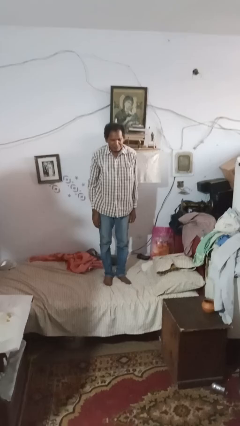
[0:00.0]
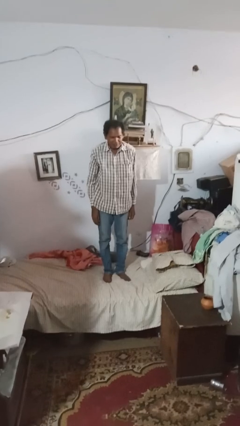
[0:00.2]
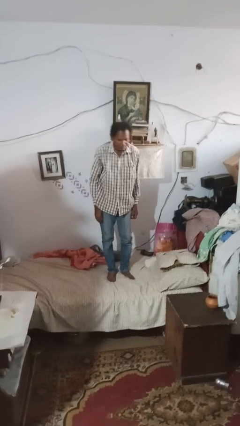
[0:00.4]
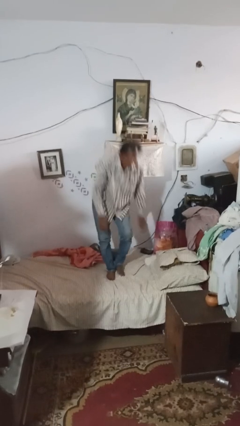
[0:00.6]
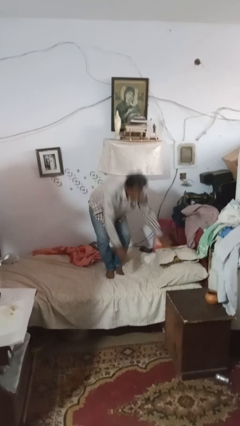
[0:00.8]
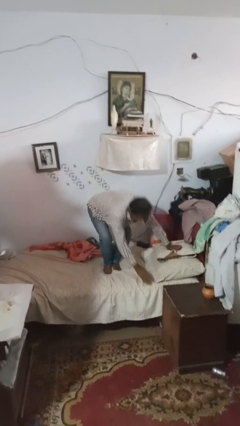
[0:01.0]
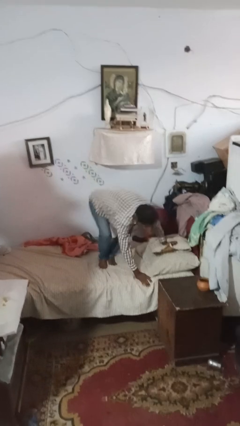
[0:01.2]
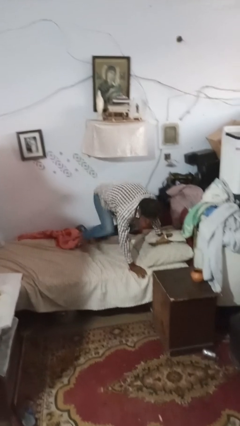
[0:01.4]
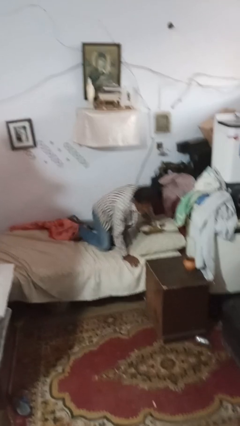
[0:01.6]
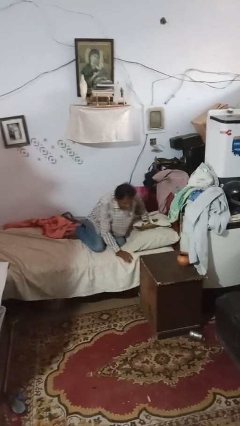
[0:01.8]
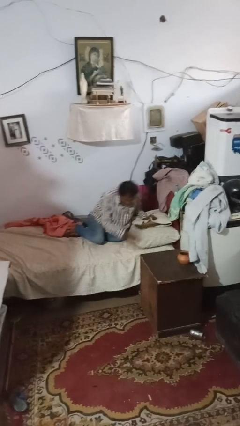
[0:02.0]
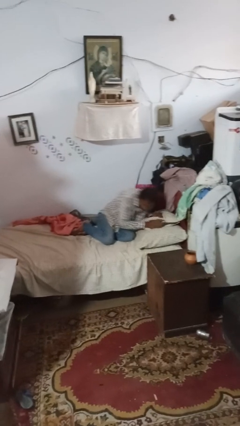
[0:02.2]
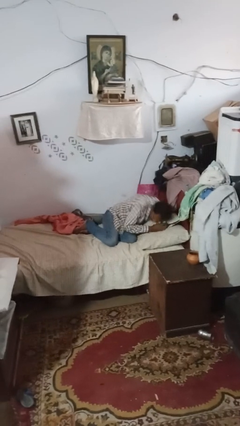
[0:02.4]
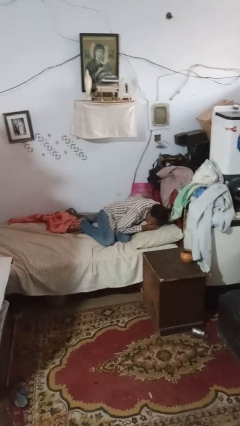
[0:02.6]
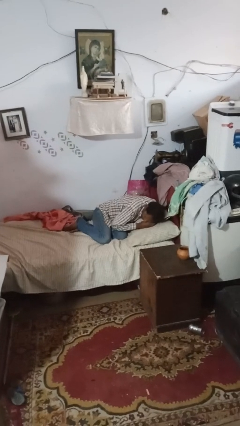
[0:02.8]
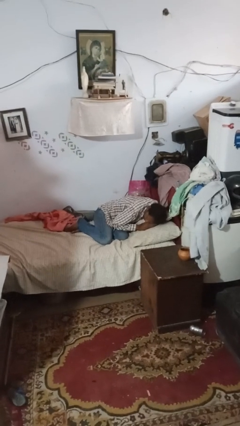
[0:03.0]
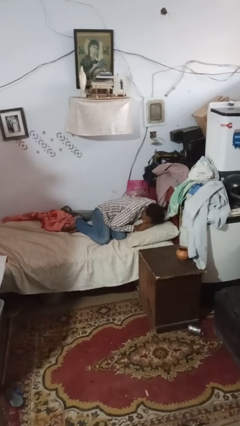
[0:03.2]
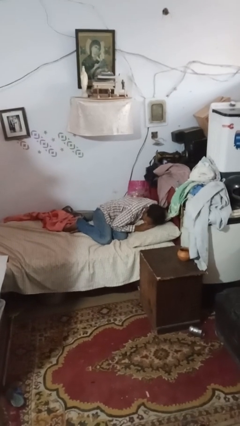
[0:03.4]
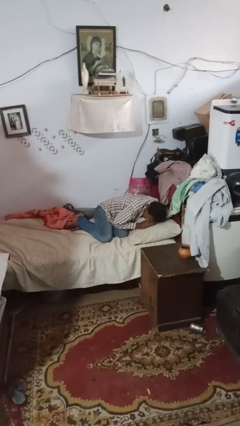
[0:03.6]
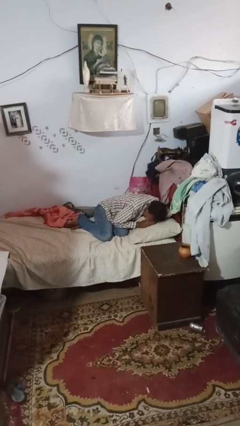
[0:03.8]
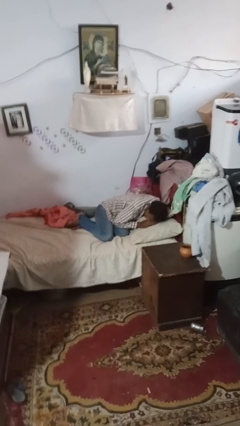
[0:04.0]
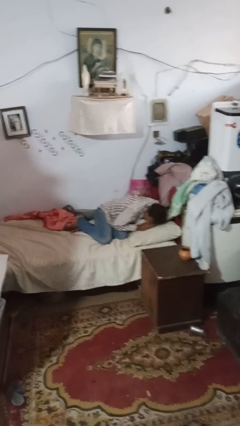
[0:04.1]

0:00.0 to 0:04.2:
person lies down on bed

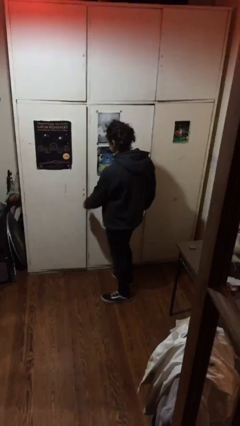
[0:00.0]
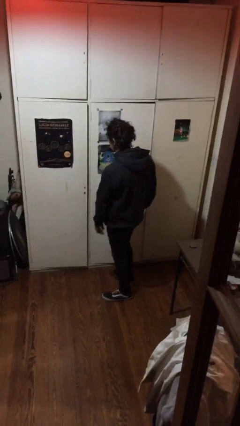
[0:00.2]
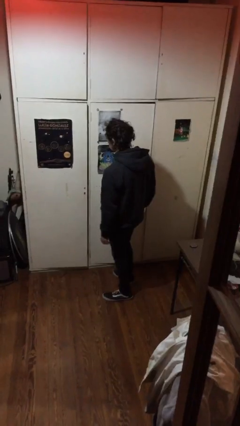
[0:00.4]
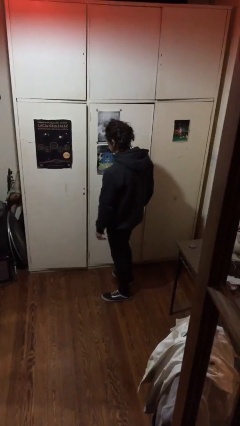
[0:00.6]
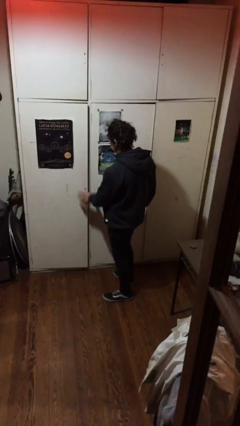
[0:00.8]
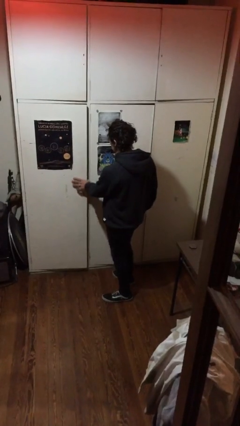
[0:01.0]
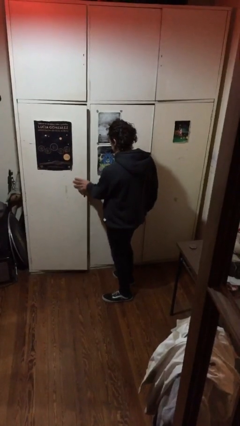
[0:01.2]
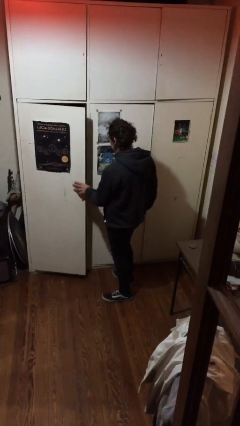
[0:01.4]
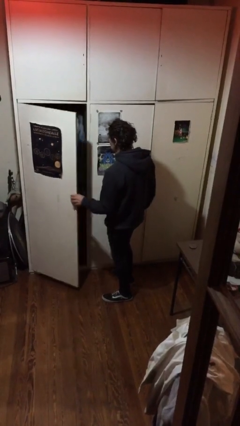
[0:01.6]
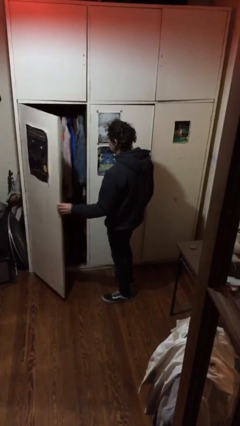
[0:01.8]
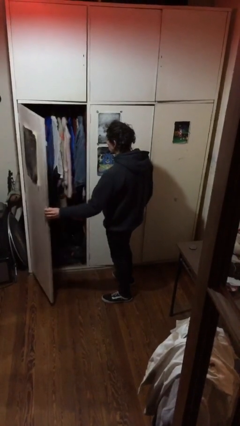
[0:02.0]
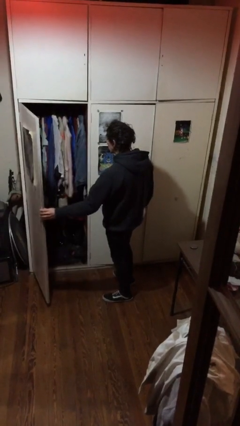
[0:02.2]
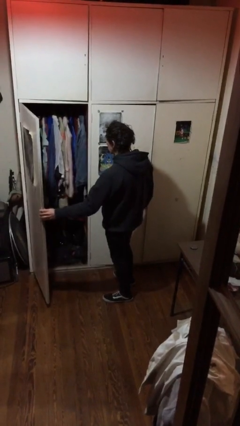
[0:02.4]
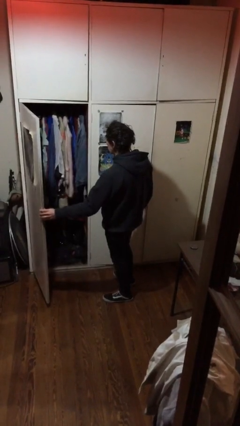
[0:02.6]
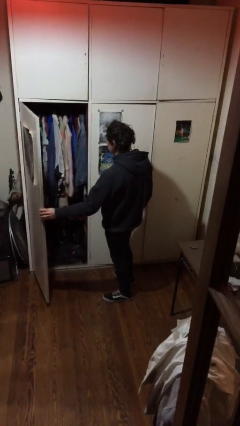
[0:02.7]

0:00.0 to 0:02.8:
person opens closet door

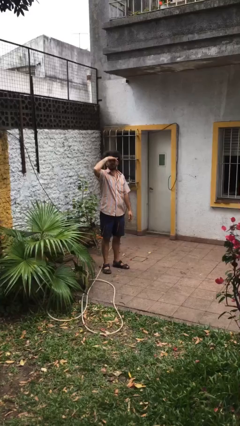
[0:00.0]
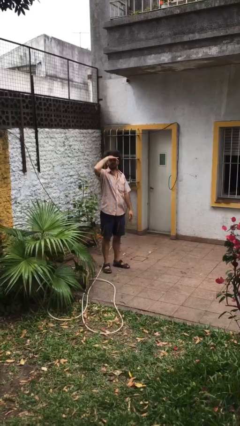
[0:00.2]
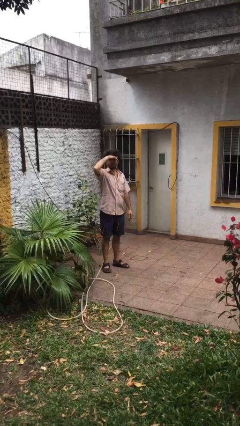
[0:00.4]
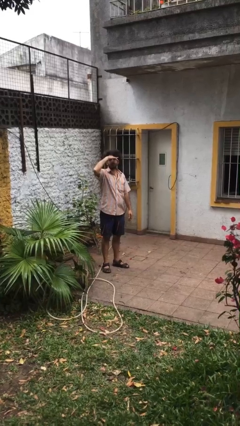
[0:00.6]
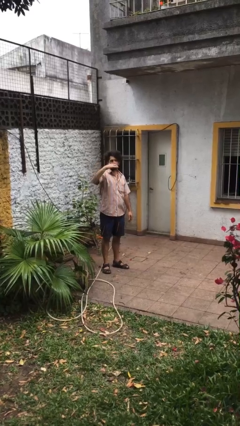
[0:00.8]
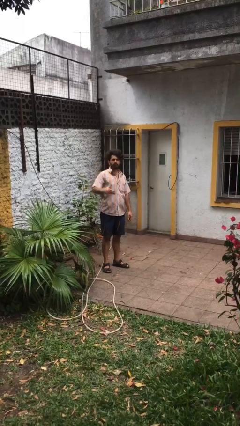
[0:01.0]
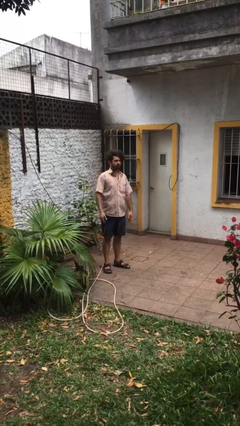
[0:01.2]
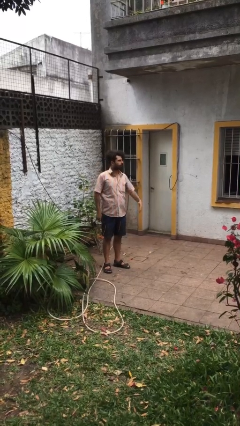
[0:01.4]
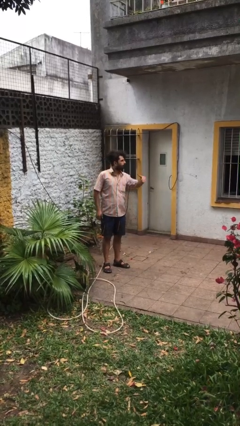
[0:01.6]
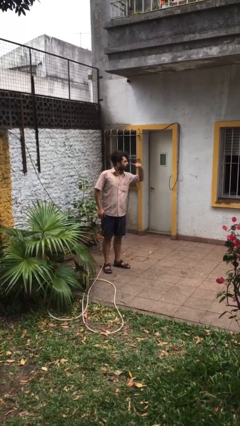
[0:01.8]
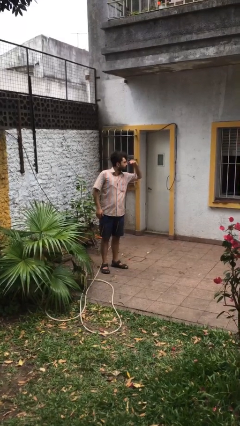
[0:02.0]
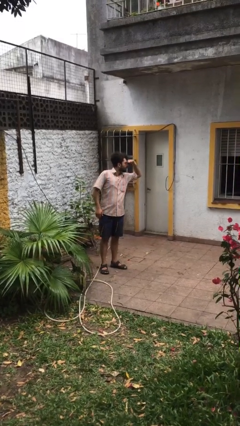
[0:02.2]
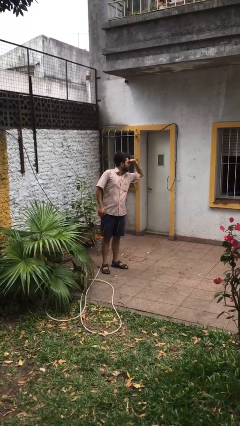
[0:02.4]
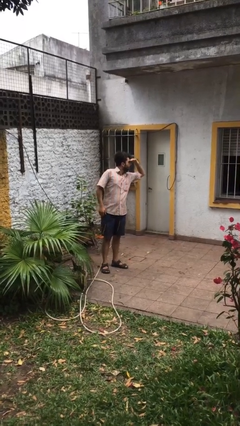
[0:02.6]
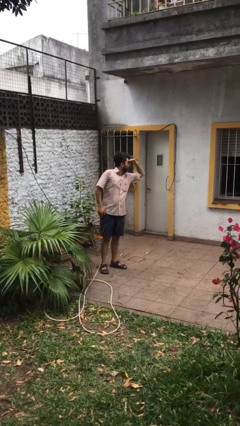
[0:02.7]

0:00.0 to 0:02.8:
person shades eyes

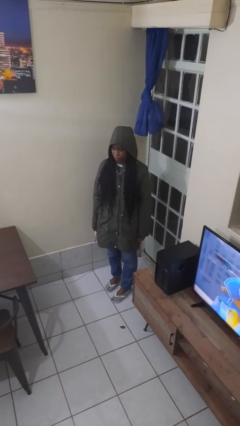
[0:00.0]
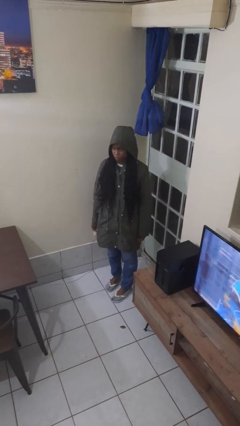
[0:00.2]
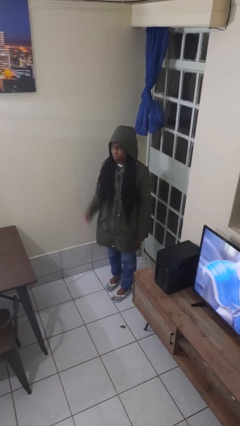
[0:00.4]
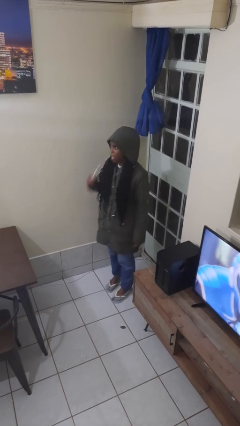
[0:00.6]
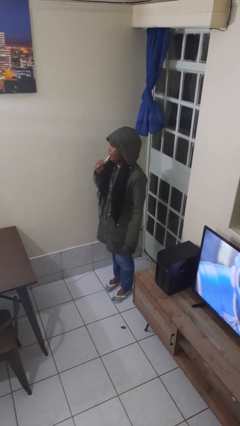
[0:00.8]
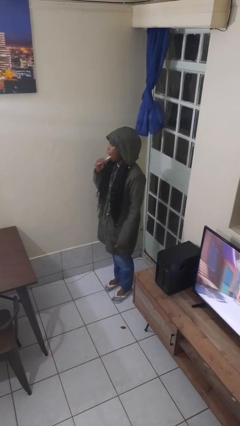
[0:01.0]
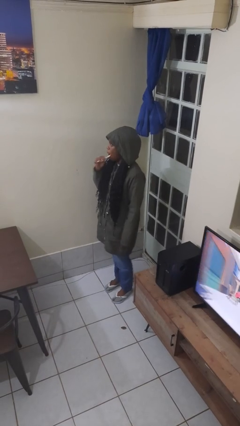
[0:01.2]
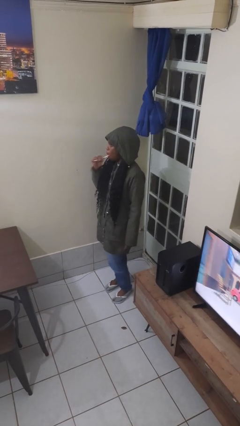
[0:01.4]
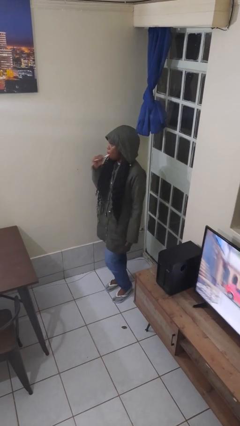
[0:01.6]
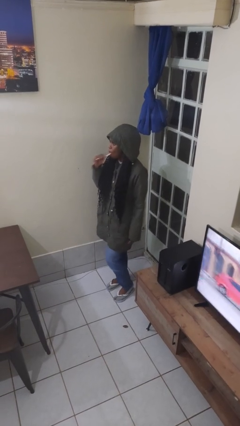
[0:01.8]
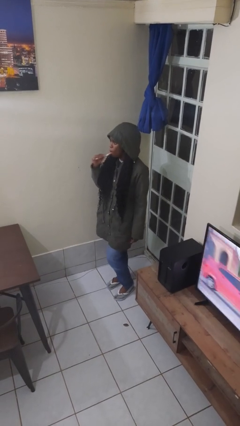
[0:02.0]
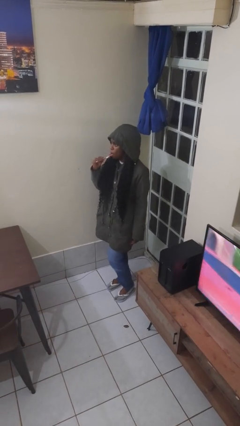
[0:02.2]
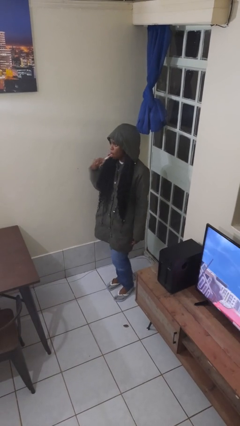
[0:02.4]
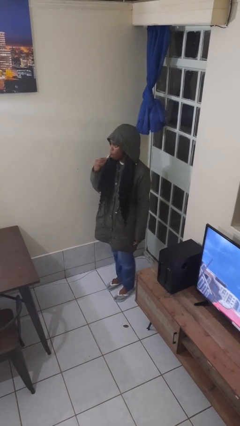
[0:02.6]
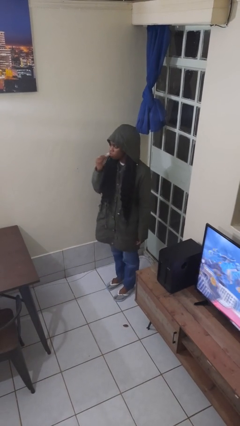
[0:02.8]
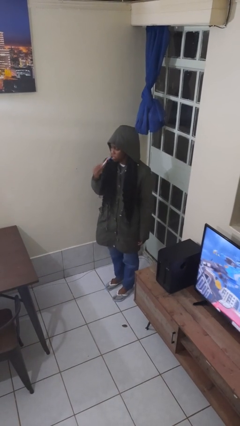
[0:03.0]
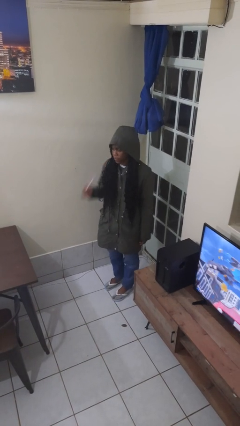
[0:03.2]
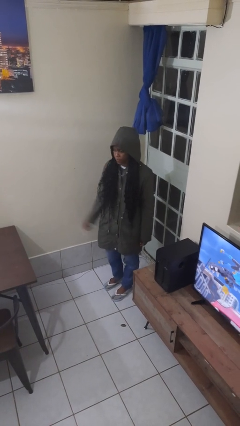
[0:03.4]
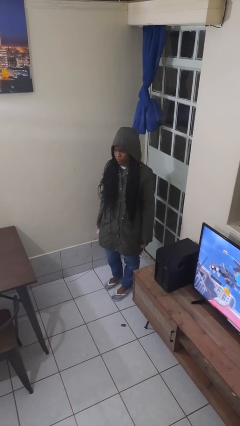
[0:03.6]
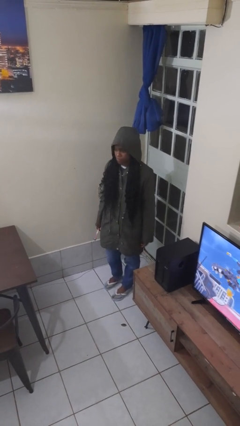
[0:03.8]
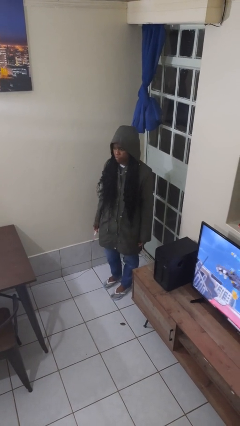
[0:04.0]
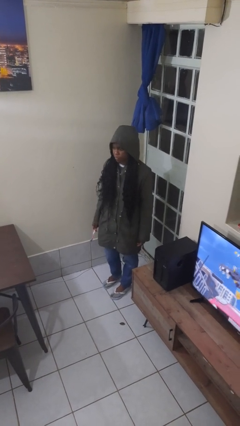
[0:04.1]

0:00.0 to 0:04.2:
person brushes teeth

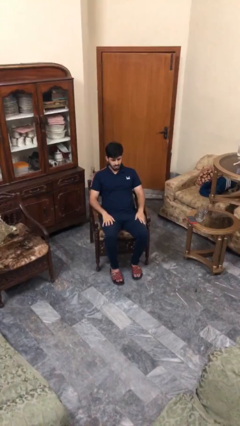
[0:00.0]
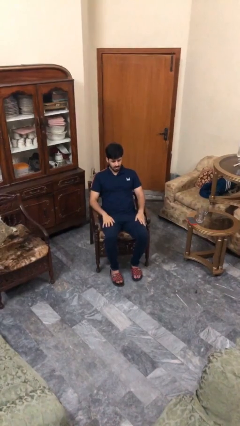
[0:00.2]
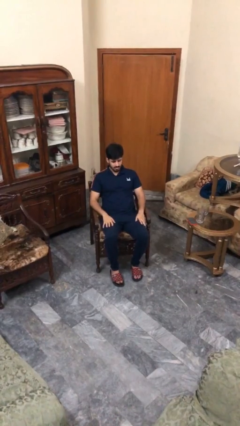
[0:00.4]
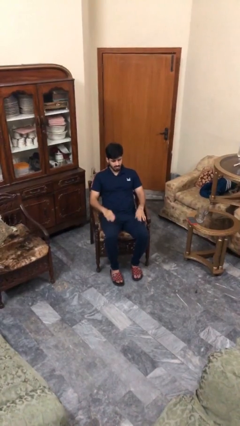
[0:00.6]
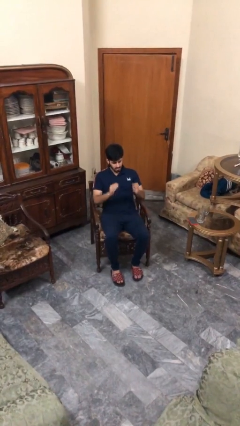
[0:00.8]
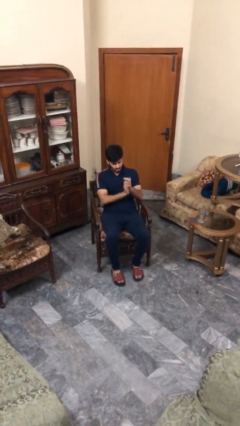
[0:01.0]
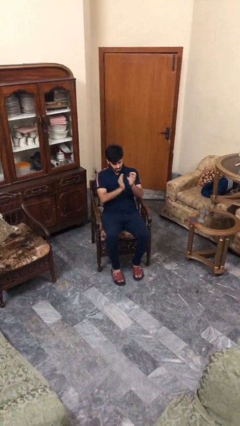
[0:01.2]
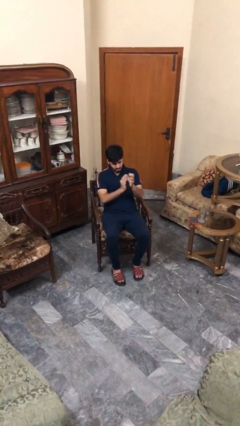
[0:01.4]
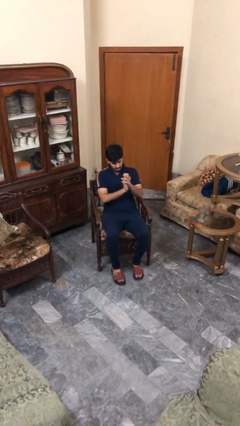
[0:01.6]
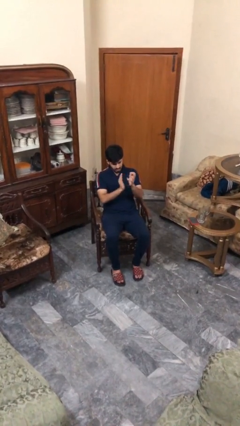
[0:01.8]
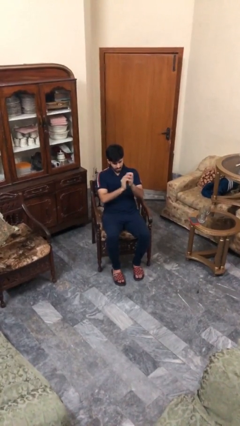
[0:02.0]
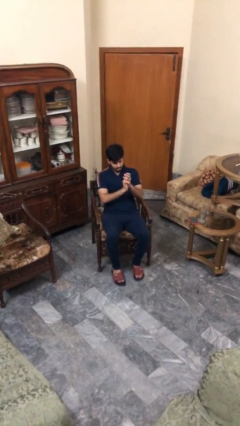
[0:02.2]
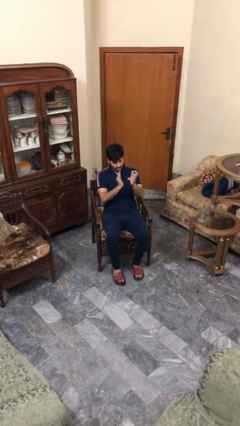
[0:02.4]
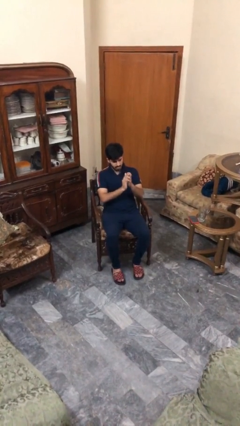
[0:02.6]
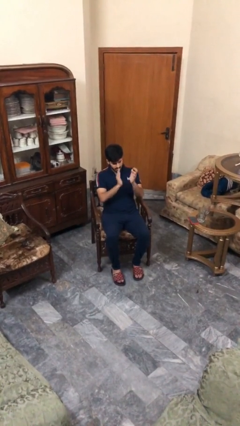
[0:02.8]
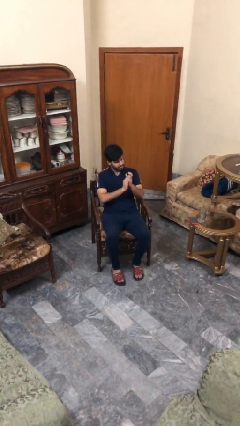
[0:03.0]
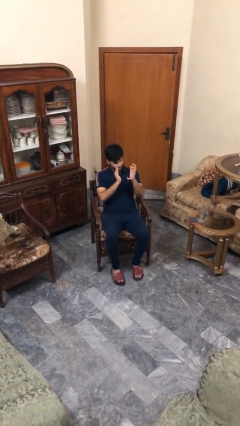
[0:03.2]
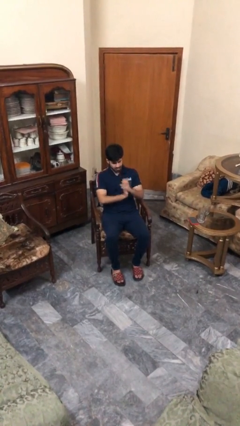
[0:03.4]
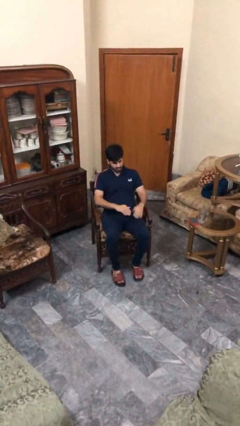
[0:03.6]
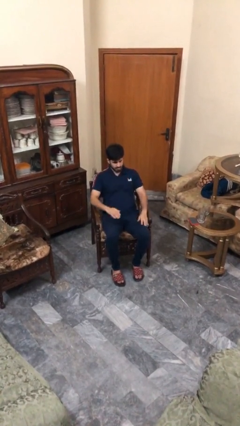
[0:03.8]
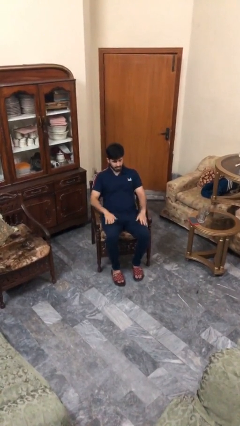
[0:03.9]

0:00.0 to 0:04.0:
person claps hands
